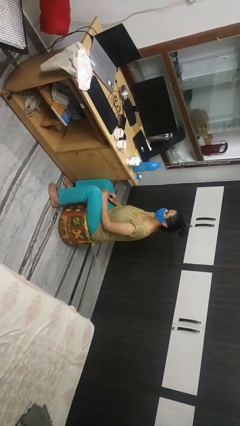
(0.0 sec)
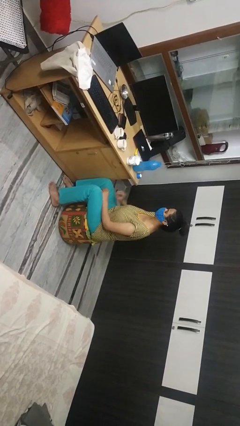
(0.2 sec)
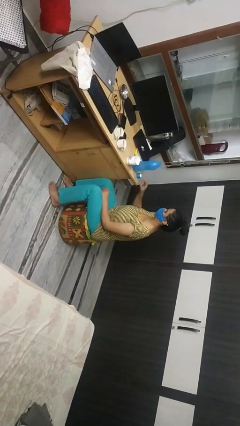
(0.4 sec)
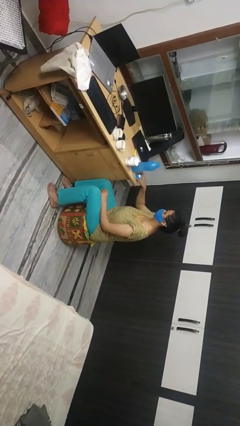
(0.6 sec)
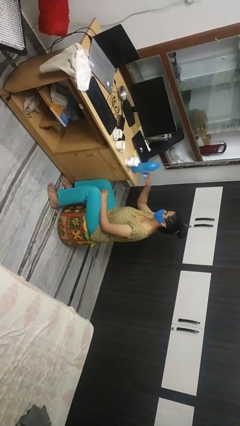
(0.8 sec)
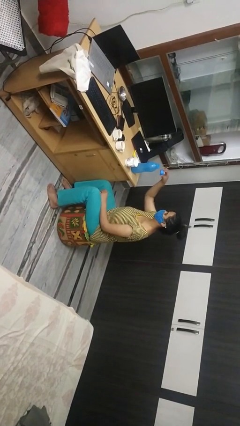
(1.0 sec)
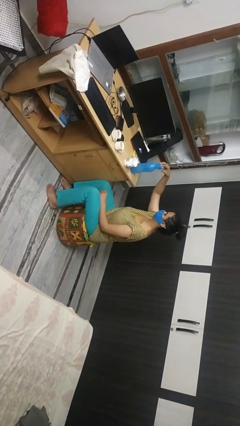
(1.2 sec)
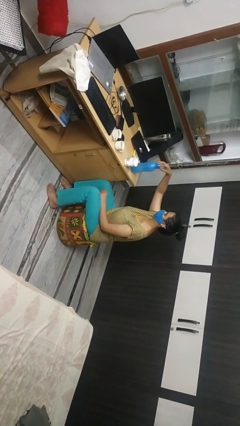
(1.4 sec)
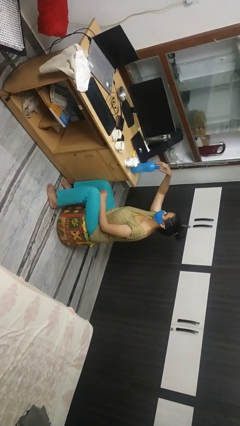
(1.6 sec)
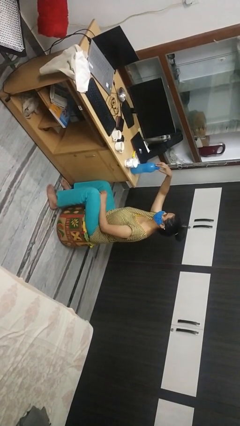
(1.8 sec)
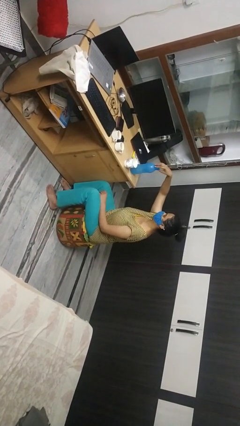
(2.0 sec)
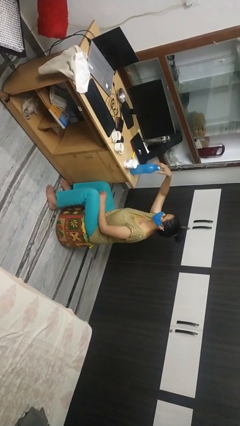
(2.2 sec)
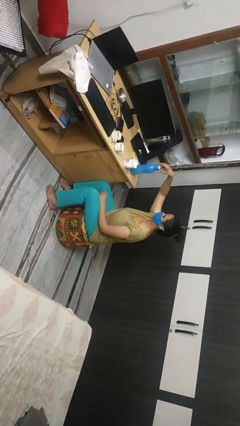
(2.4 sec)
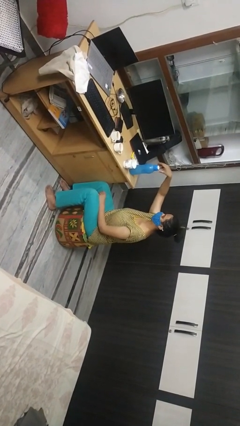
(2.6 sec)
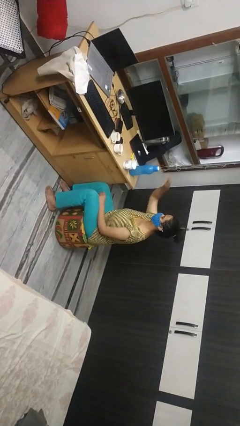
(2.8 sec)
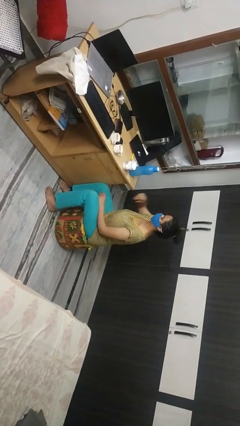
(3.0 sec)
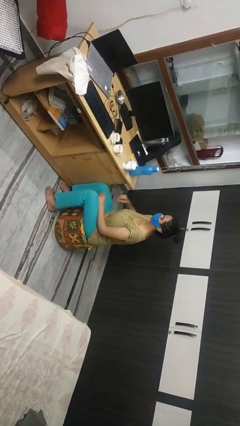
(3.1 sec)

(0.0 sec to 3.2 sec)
person screws lid to bottle

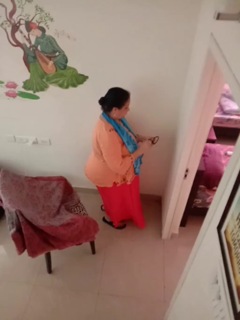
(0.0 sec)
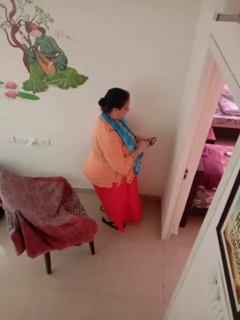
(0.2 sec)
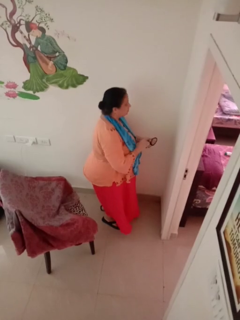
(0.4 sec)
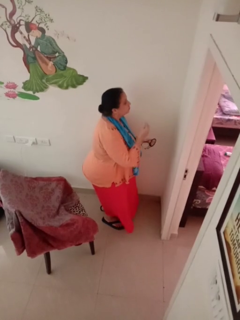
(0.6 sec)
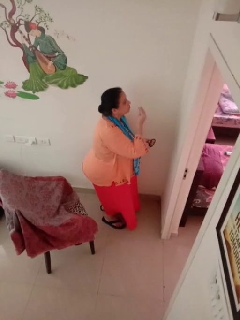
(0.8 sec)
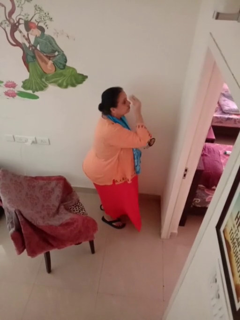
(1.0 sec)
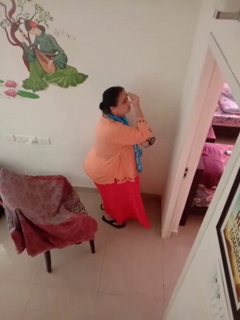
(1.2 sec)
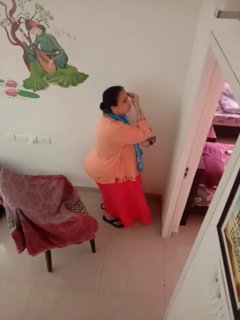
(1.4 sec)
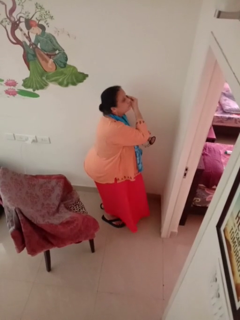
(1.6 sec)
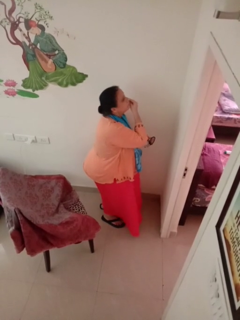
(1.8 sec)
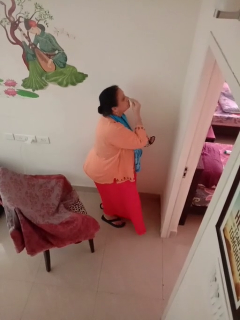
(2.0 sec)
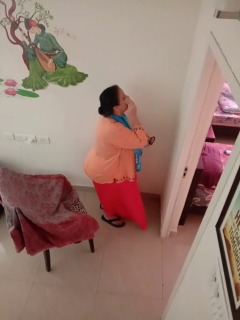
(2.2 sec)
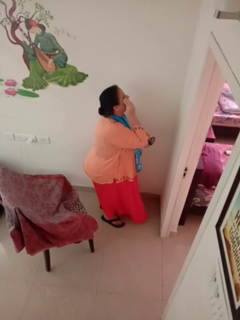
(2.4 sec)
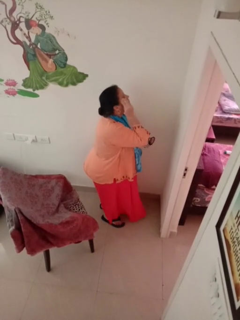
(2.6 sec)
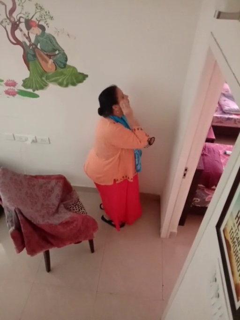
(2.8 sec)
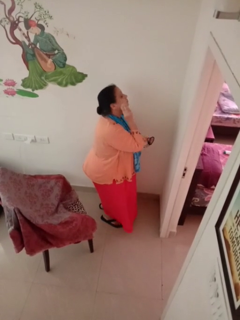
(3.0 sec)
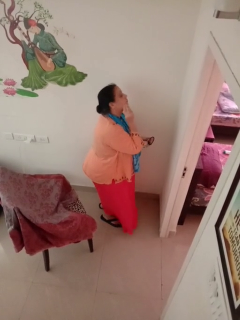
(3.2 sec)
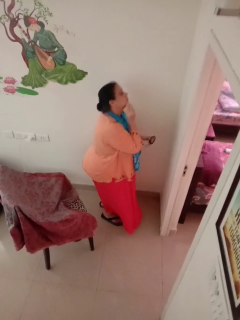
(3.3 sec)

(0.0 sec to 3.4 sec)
person applies foundation makeup

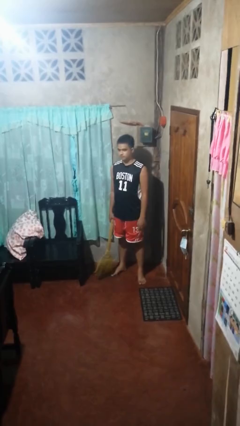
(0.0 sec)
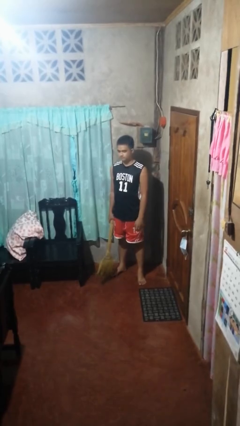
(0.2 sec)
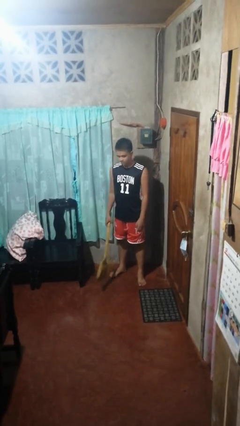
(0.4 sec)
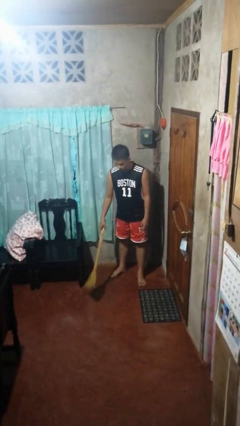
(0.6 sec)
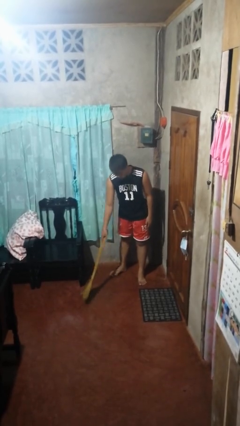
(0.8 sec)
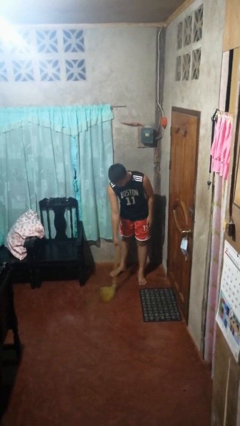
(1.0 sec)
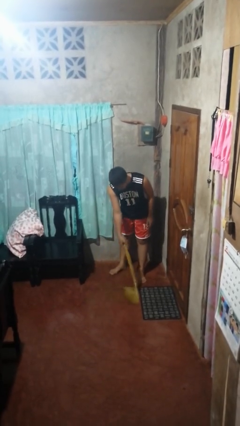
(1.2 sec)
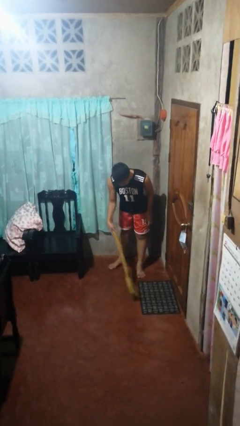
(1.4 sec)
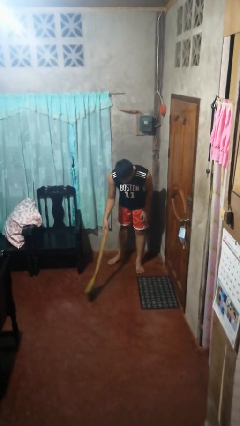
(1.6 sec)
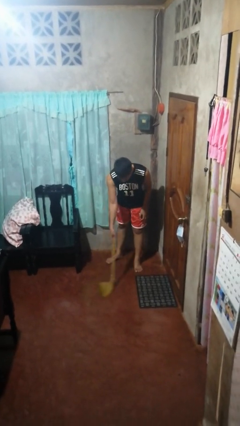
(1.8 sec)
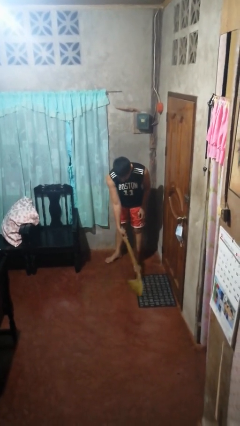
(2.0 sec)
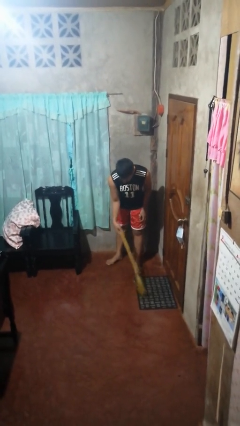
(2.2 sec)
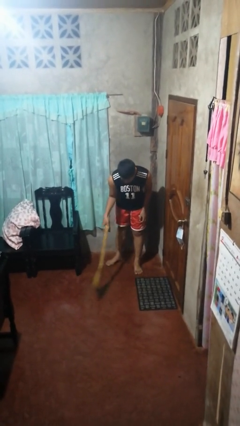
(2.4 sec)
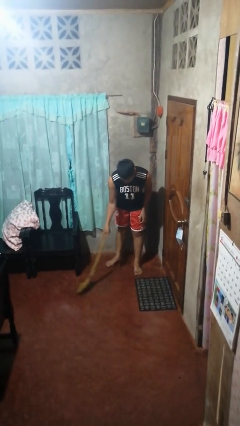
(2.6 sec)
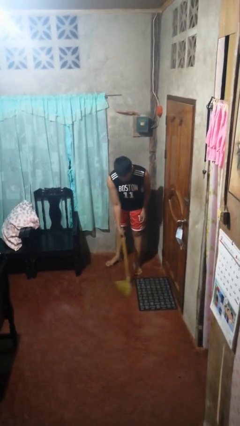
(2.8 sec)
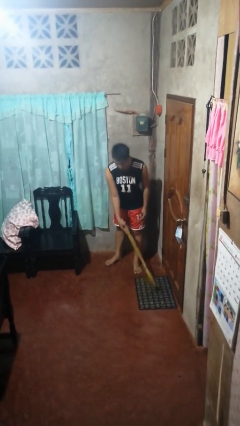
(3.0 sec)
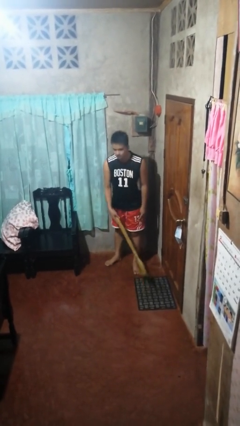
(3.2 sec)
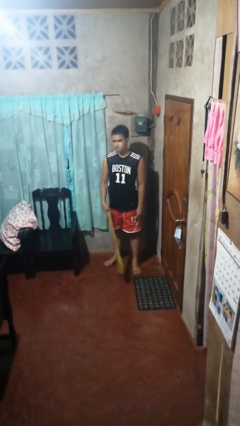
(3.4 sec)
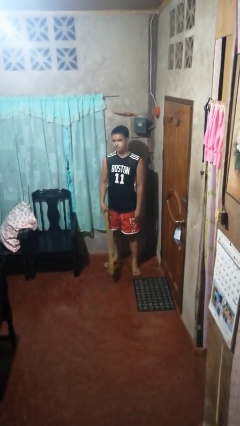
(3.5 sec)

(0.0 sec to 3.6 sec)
person sweeps floor

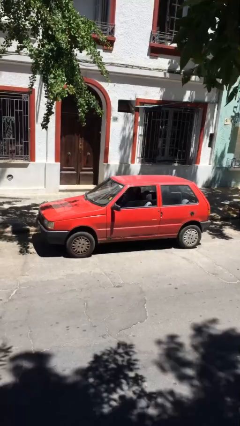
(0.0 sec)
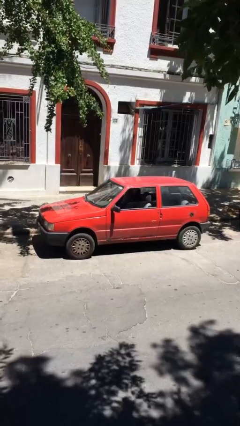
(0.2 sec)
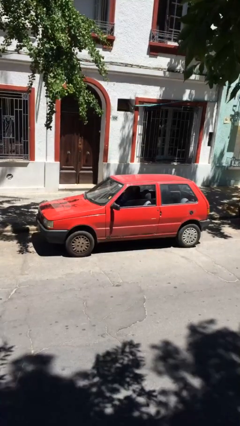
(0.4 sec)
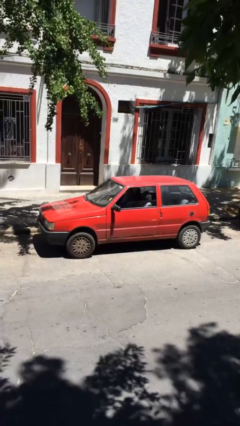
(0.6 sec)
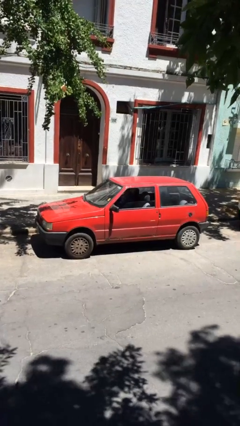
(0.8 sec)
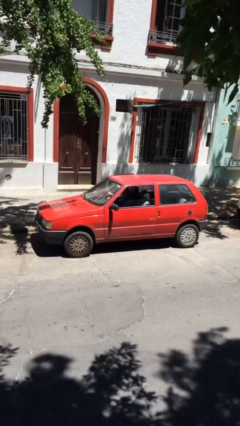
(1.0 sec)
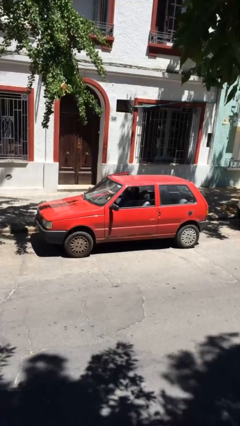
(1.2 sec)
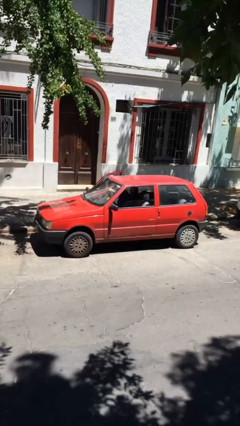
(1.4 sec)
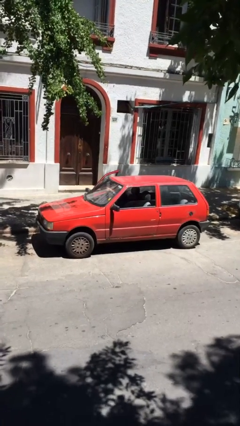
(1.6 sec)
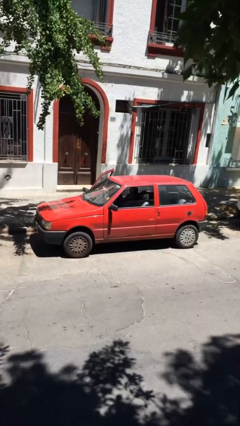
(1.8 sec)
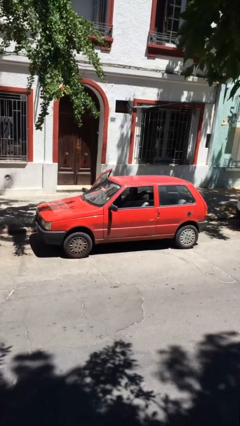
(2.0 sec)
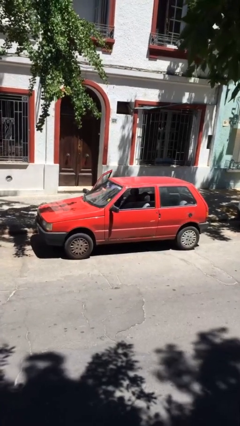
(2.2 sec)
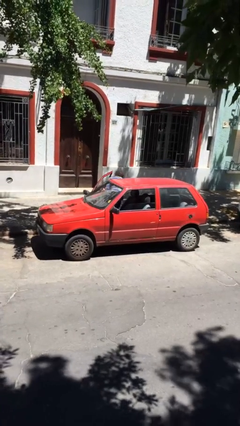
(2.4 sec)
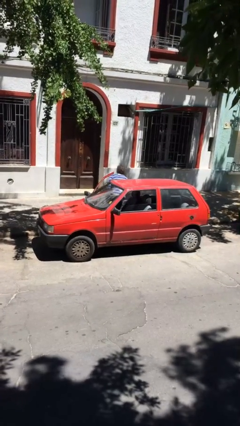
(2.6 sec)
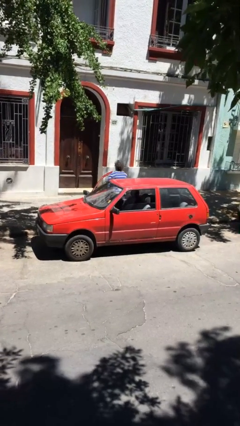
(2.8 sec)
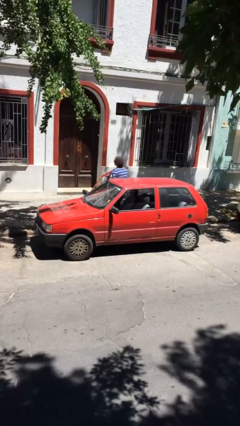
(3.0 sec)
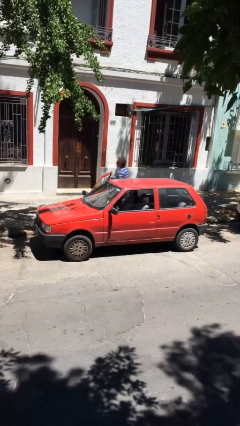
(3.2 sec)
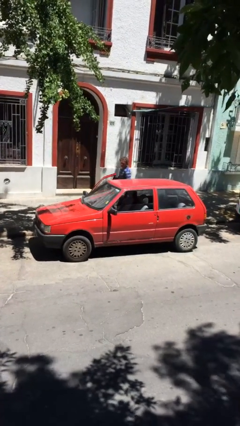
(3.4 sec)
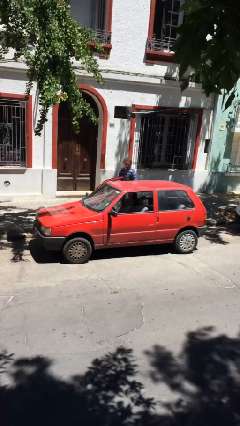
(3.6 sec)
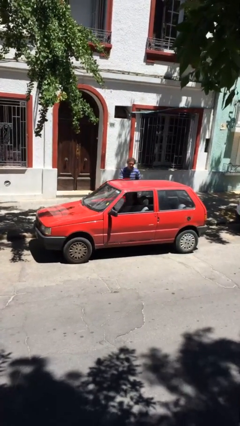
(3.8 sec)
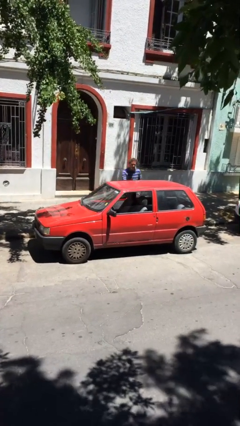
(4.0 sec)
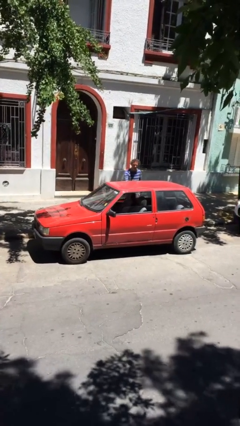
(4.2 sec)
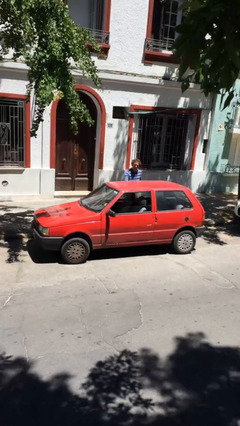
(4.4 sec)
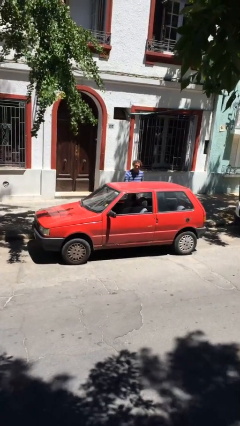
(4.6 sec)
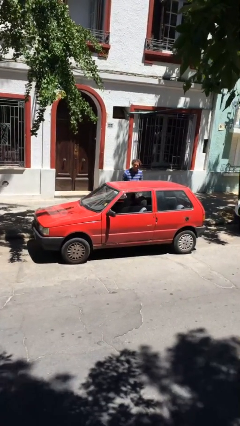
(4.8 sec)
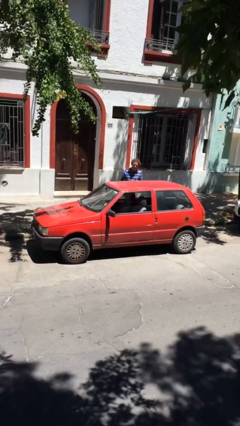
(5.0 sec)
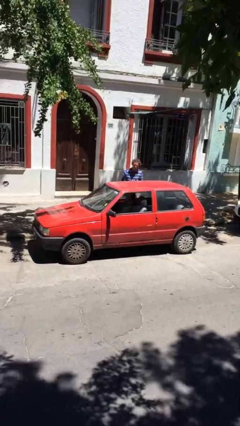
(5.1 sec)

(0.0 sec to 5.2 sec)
car drops off person

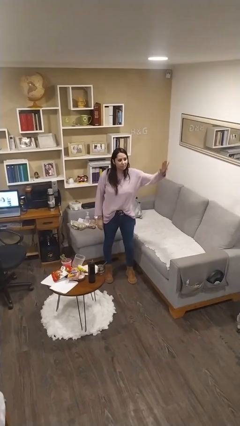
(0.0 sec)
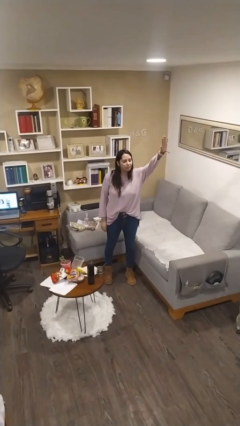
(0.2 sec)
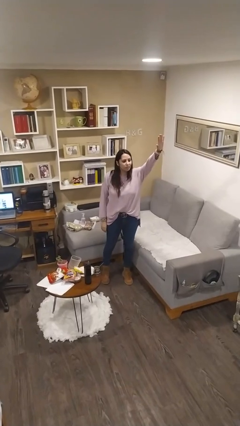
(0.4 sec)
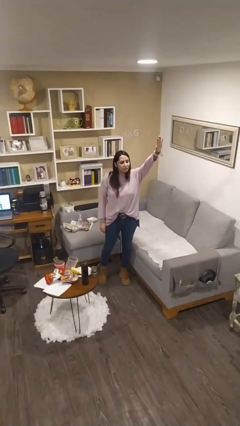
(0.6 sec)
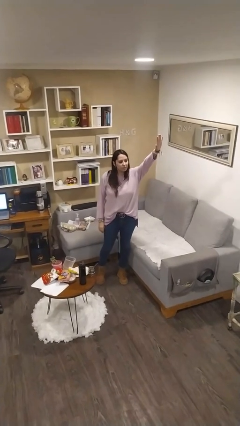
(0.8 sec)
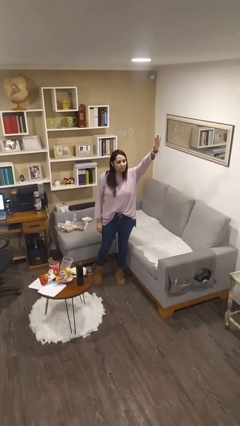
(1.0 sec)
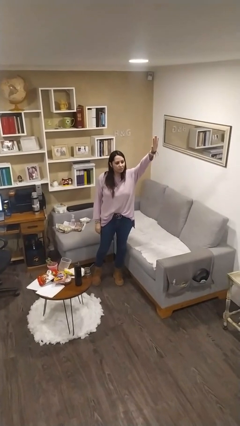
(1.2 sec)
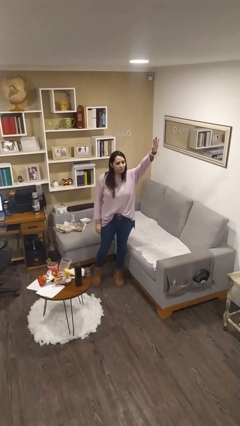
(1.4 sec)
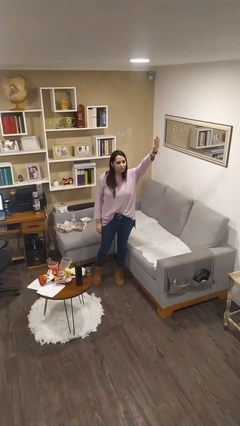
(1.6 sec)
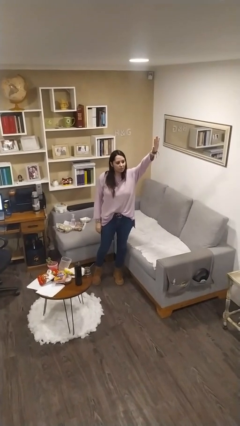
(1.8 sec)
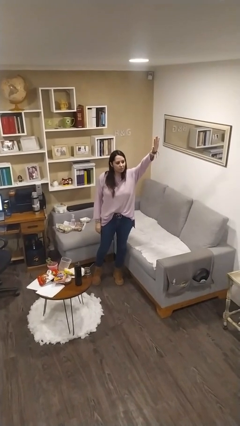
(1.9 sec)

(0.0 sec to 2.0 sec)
person gestures raise hand

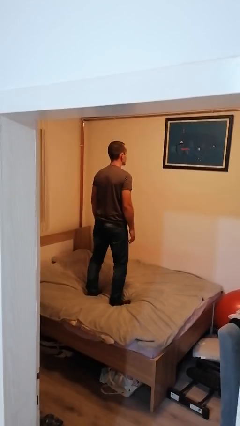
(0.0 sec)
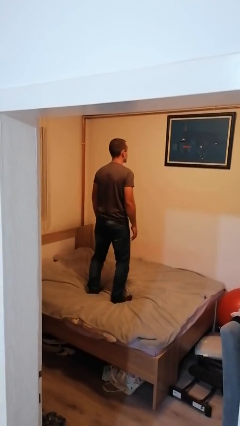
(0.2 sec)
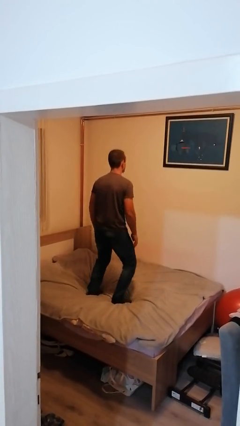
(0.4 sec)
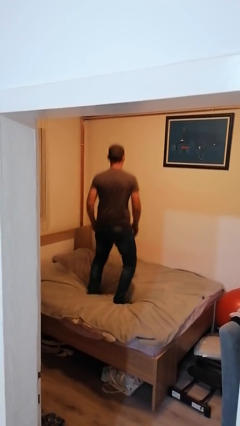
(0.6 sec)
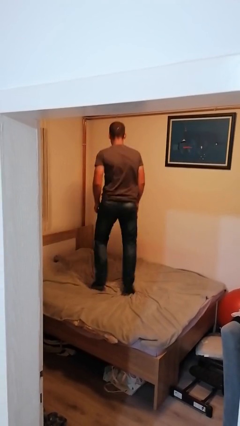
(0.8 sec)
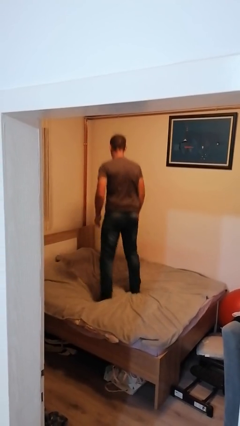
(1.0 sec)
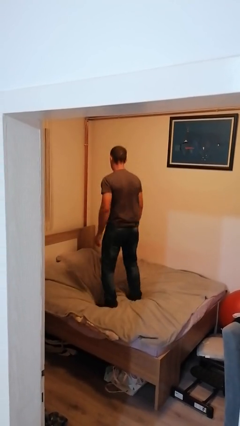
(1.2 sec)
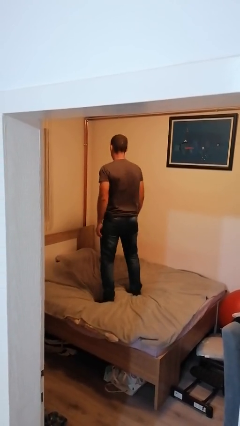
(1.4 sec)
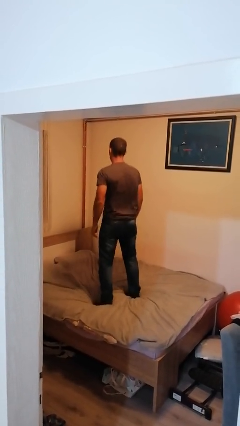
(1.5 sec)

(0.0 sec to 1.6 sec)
person jumps on bed
